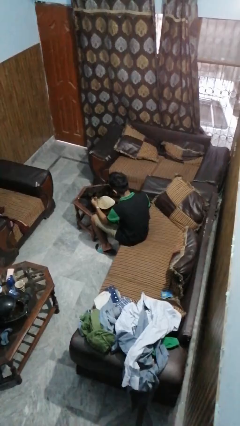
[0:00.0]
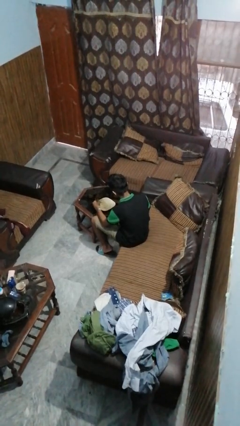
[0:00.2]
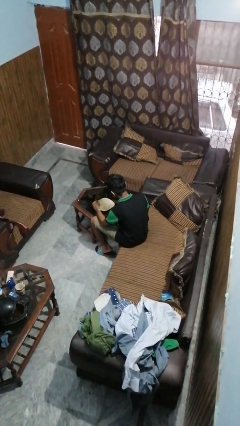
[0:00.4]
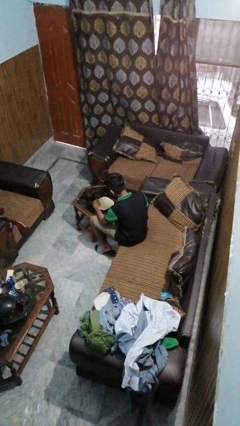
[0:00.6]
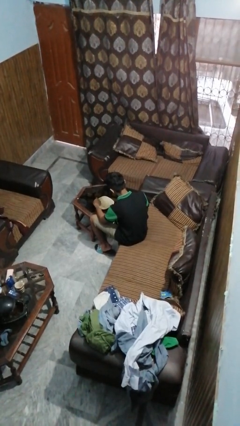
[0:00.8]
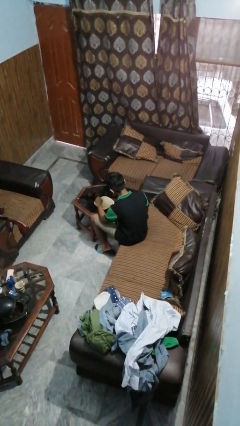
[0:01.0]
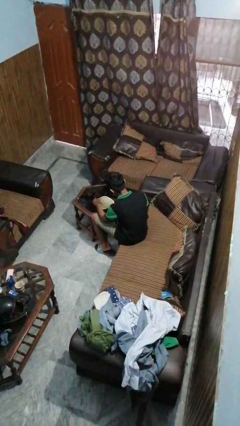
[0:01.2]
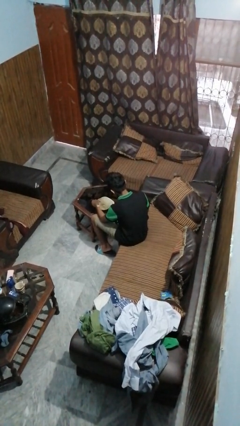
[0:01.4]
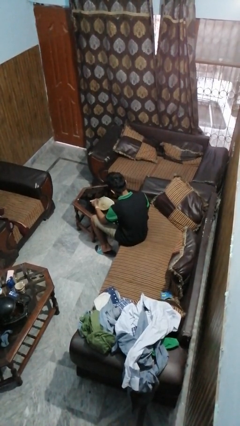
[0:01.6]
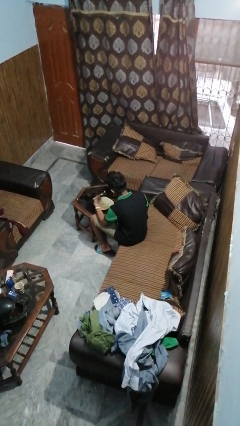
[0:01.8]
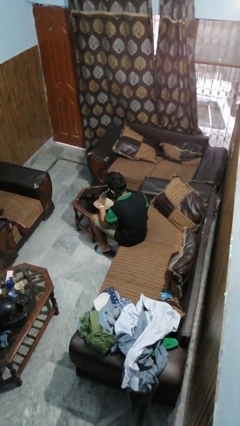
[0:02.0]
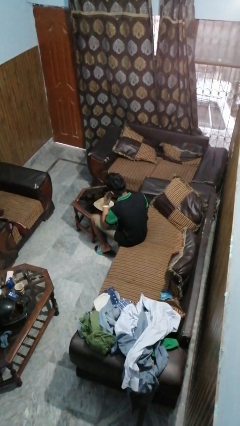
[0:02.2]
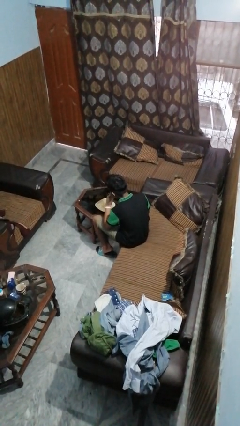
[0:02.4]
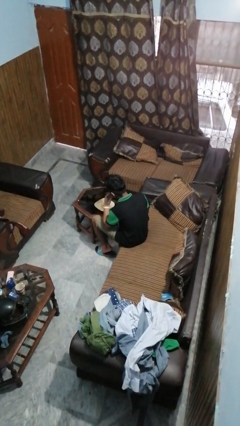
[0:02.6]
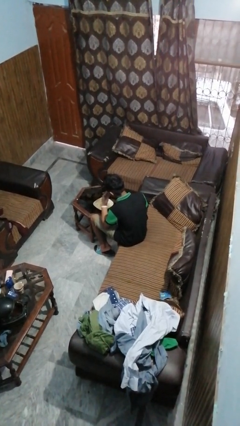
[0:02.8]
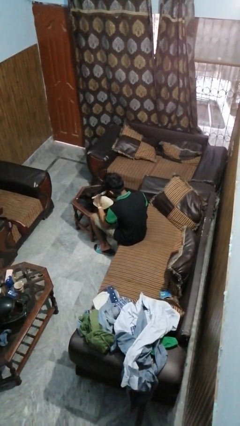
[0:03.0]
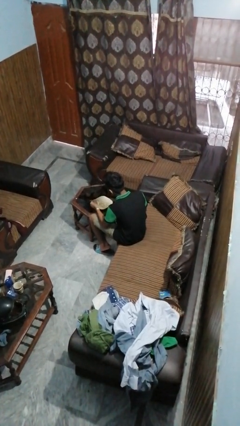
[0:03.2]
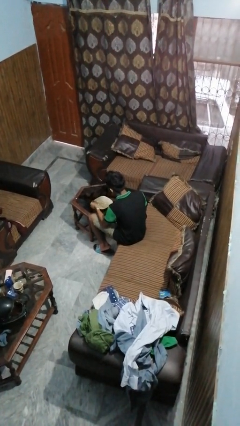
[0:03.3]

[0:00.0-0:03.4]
person eats with utensil

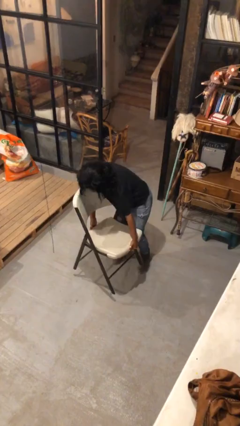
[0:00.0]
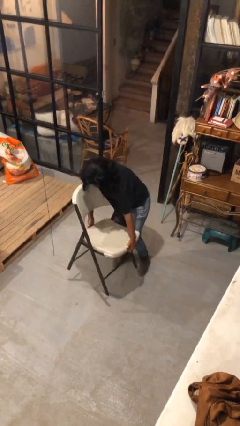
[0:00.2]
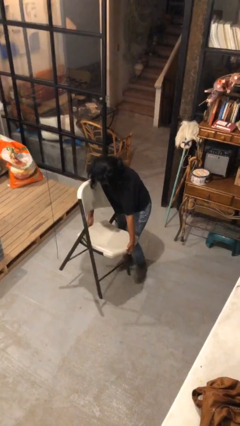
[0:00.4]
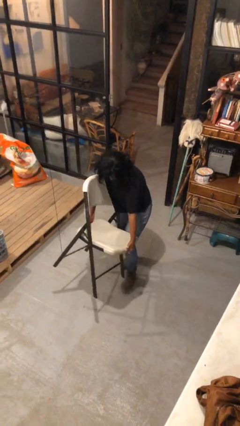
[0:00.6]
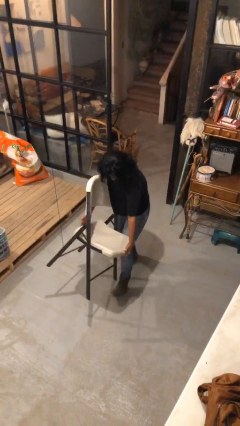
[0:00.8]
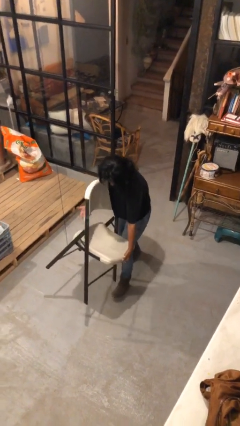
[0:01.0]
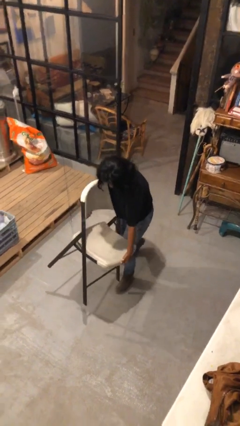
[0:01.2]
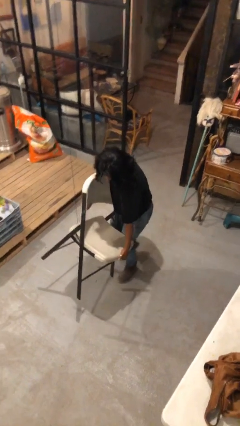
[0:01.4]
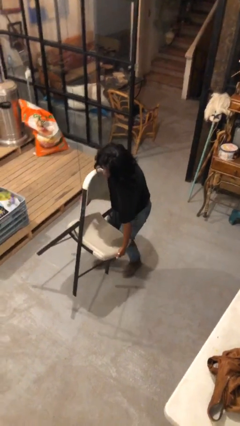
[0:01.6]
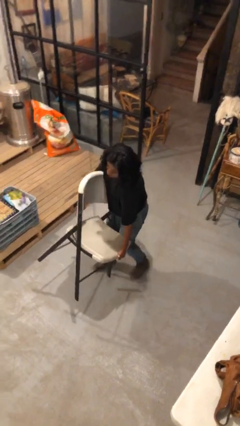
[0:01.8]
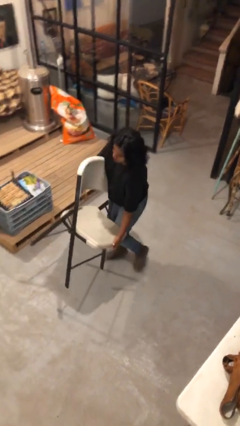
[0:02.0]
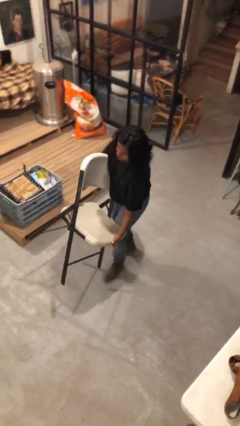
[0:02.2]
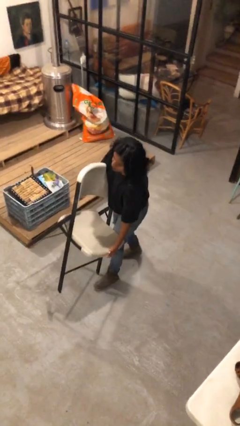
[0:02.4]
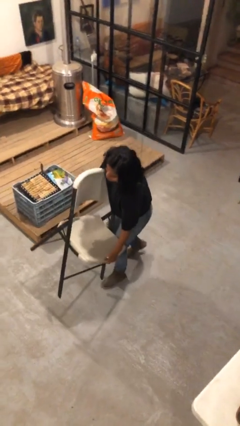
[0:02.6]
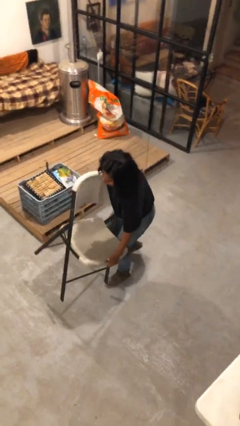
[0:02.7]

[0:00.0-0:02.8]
person carries heavy object

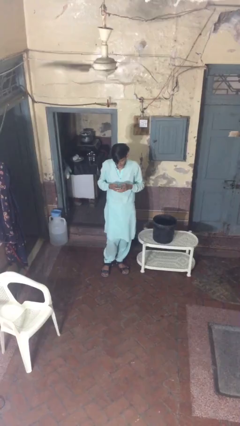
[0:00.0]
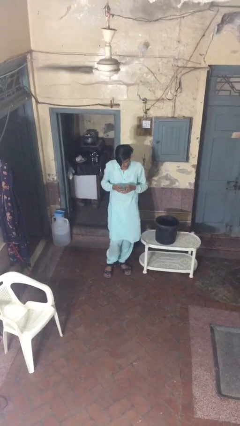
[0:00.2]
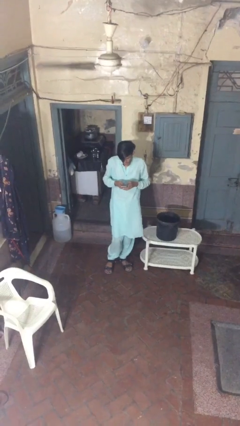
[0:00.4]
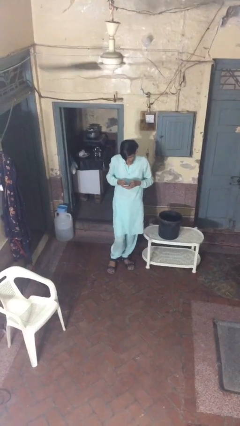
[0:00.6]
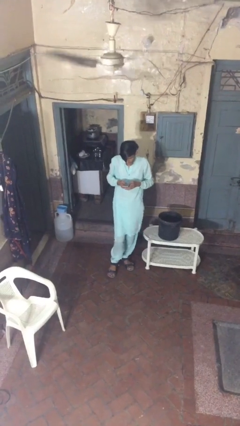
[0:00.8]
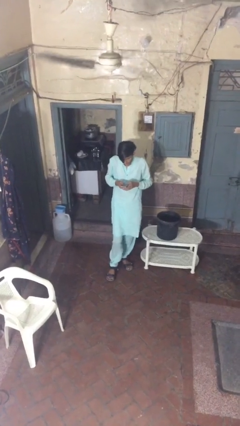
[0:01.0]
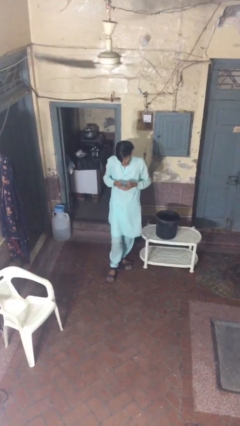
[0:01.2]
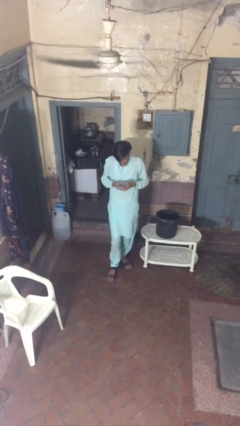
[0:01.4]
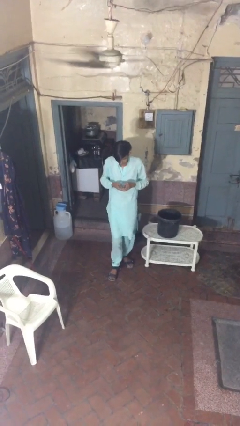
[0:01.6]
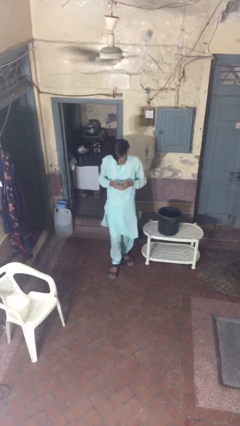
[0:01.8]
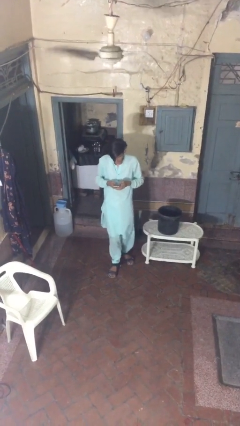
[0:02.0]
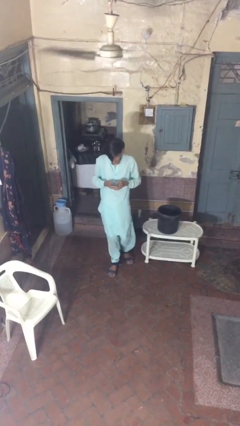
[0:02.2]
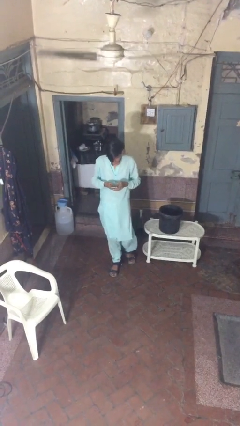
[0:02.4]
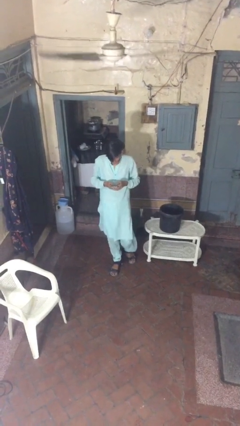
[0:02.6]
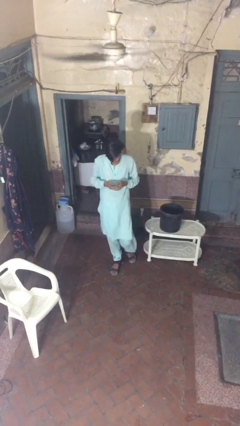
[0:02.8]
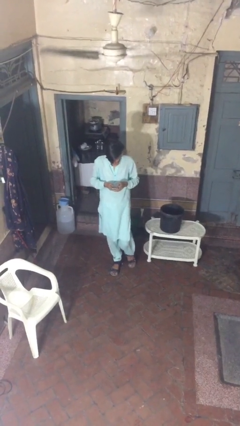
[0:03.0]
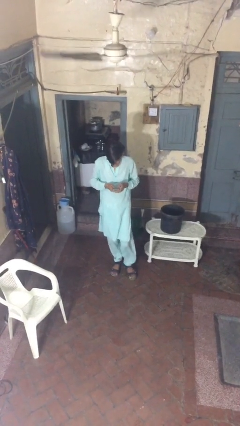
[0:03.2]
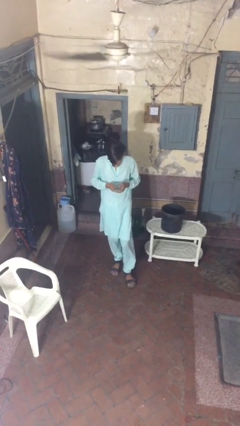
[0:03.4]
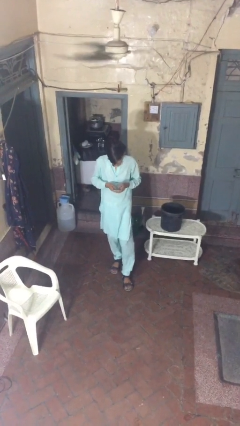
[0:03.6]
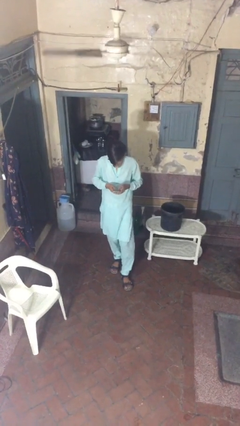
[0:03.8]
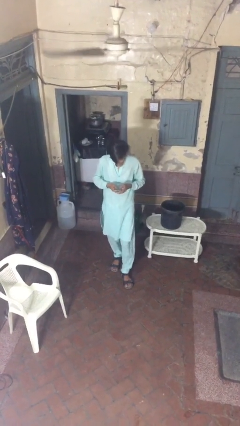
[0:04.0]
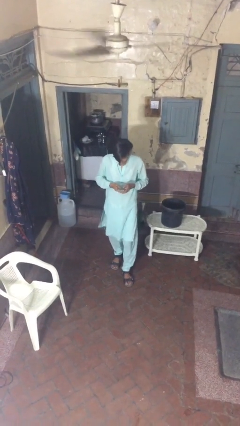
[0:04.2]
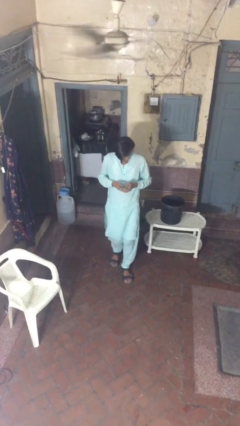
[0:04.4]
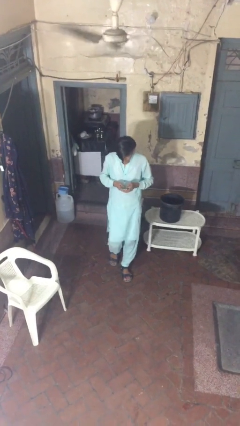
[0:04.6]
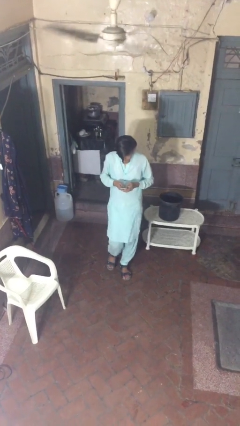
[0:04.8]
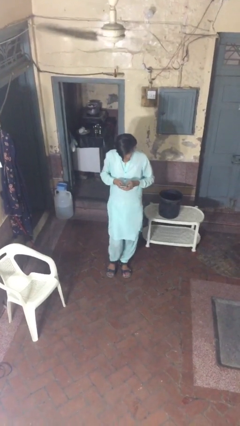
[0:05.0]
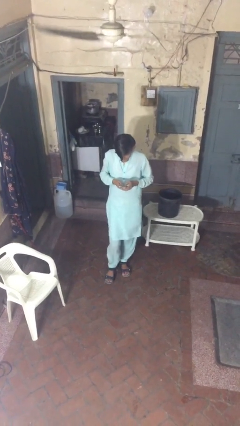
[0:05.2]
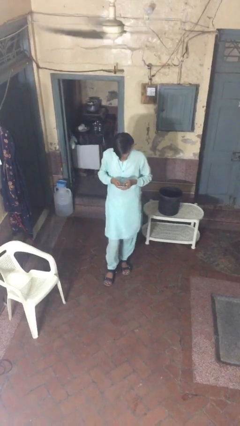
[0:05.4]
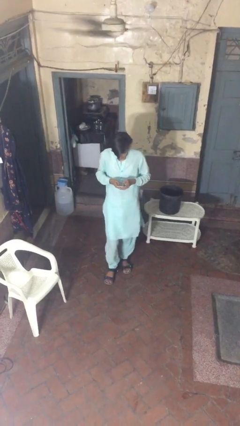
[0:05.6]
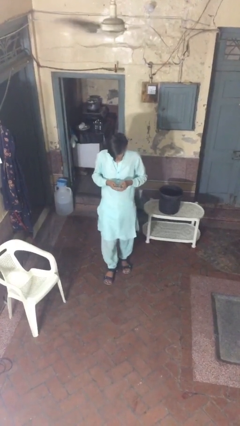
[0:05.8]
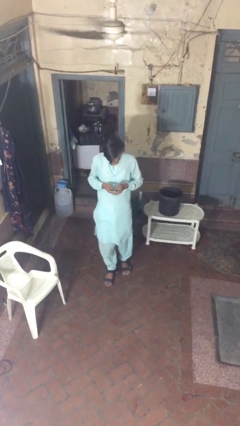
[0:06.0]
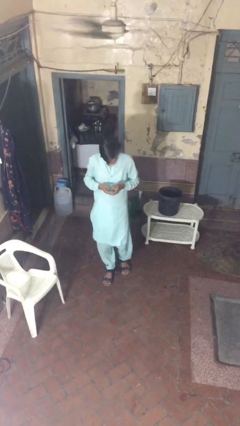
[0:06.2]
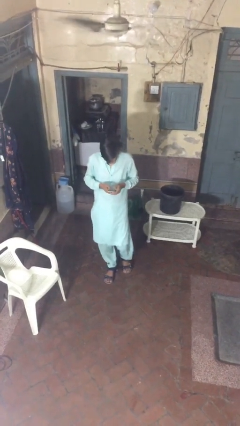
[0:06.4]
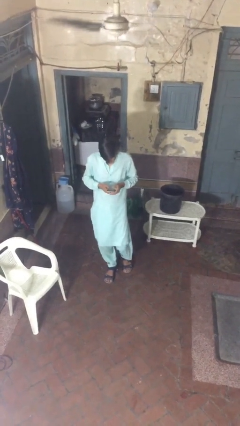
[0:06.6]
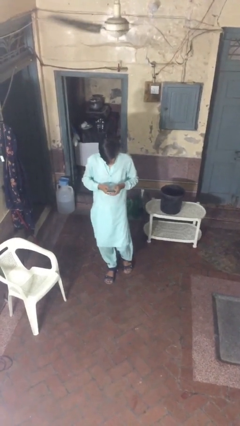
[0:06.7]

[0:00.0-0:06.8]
person texts on phone

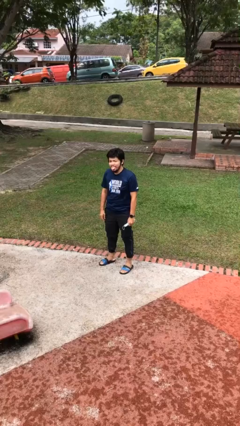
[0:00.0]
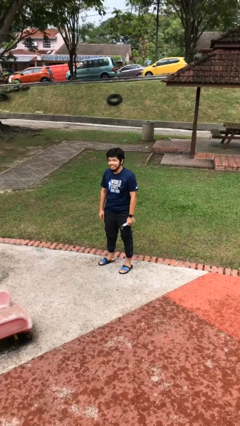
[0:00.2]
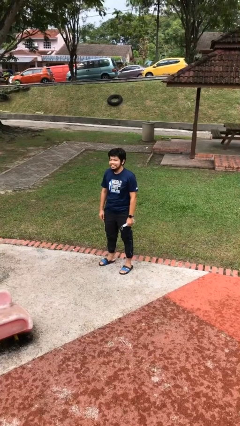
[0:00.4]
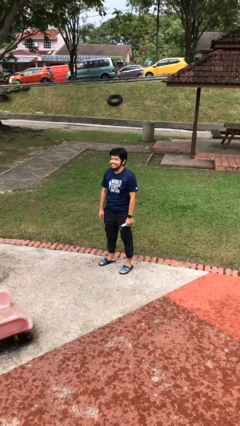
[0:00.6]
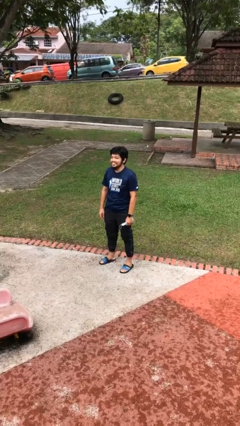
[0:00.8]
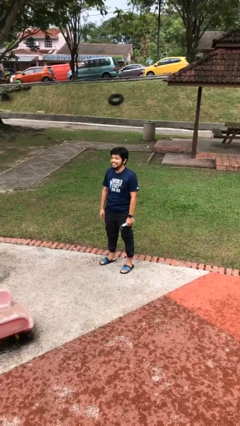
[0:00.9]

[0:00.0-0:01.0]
person sticks out tongue

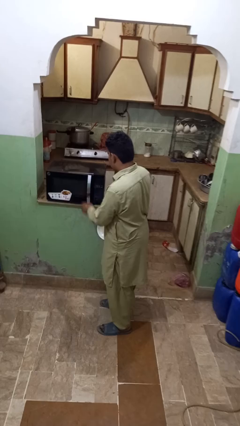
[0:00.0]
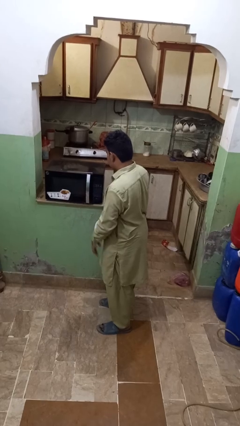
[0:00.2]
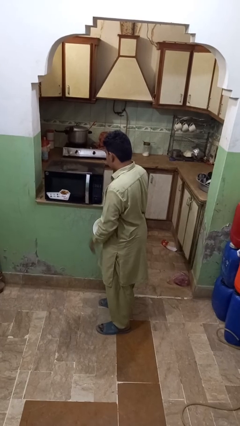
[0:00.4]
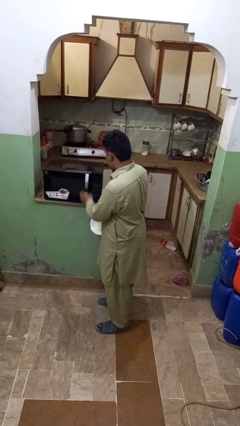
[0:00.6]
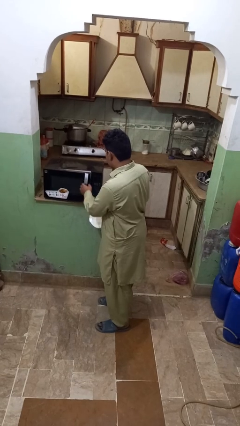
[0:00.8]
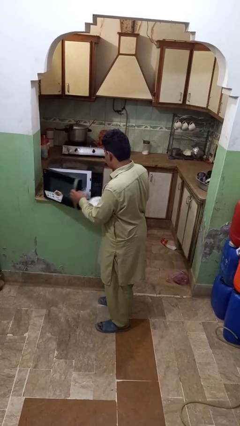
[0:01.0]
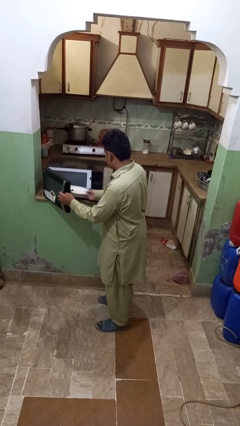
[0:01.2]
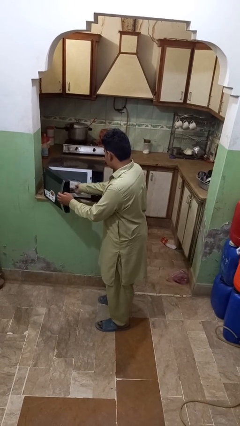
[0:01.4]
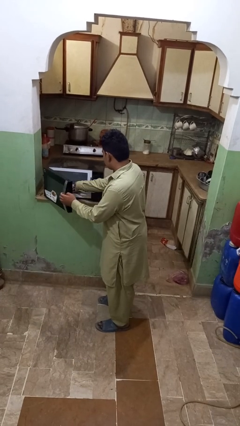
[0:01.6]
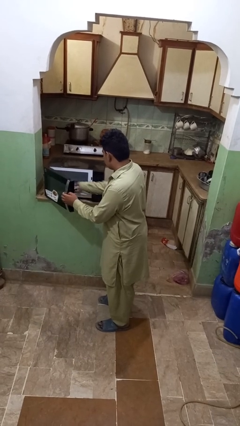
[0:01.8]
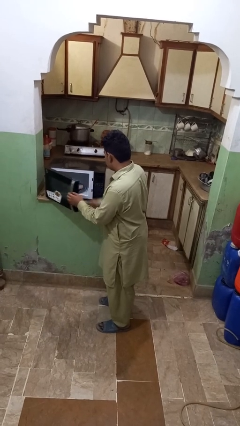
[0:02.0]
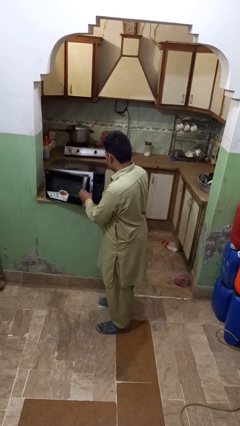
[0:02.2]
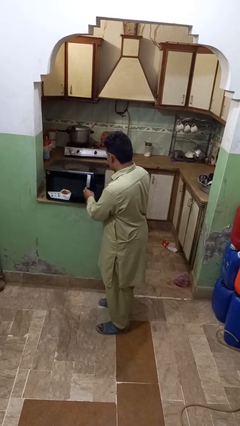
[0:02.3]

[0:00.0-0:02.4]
person puts object into microwave

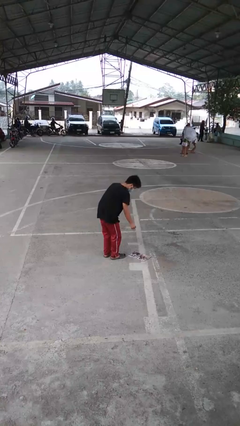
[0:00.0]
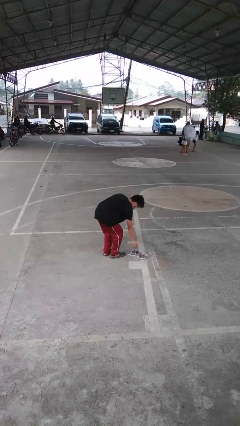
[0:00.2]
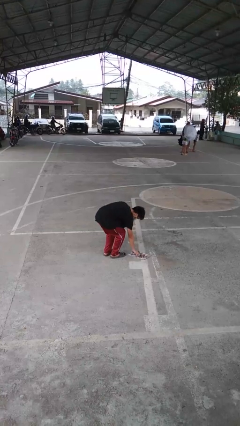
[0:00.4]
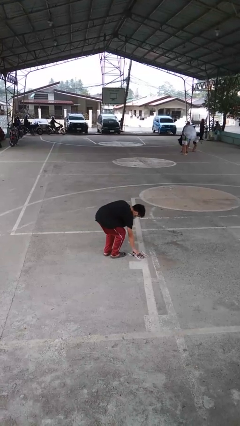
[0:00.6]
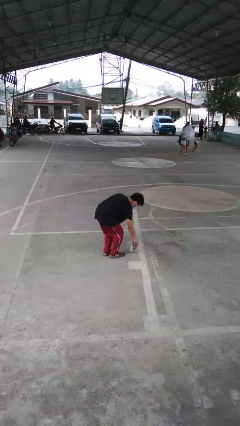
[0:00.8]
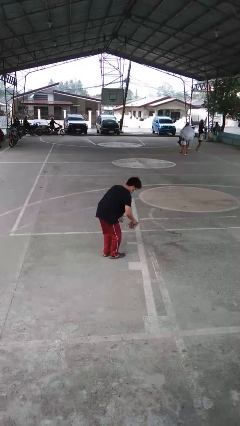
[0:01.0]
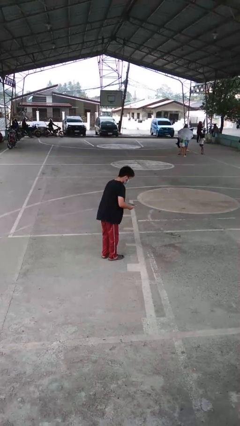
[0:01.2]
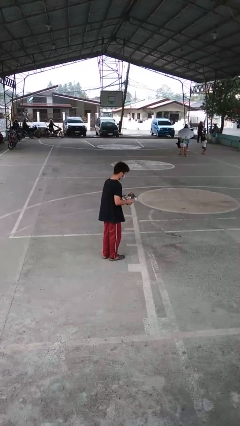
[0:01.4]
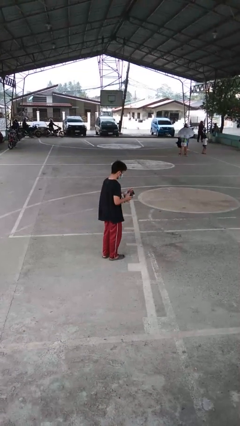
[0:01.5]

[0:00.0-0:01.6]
person picks up object from floor
